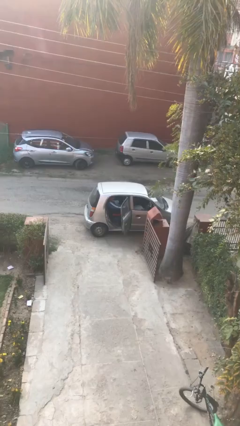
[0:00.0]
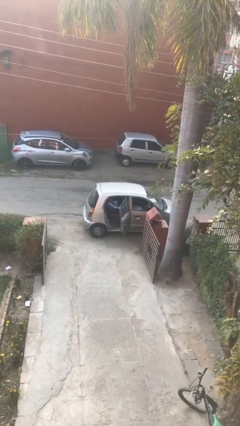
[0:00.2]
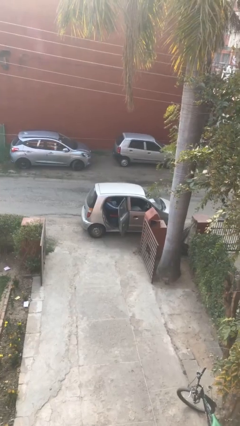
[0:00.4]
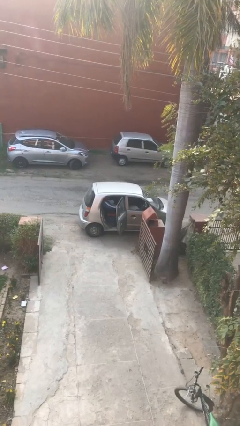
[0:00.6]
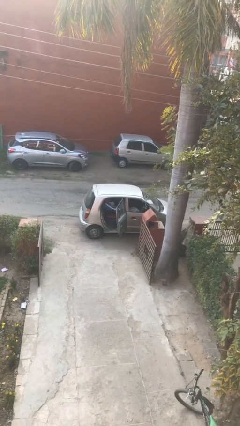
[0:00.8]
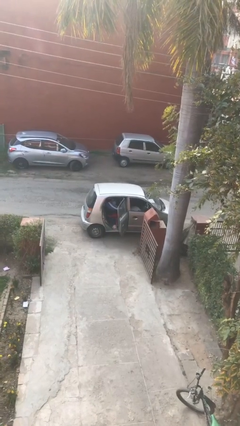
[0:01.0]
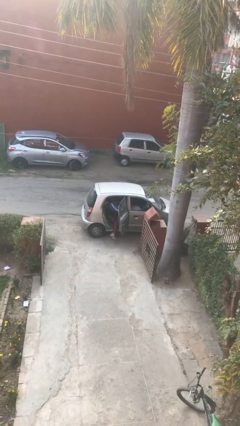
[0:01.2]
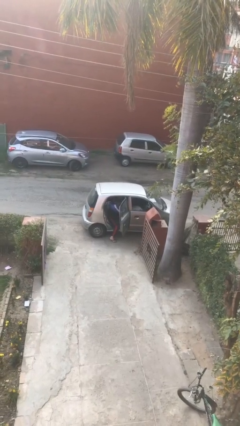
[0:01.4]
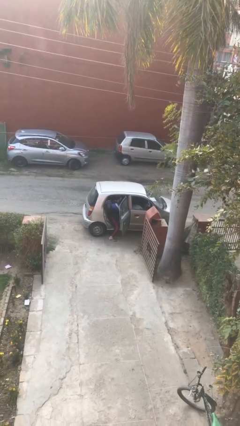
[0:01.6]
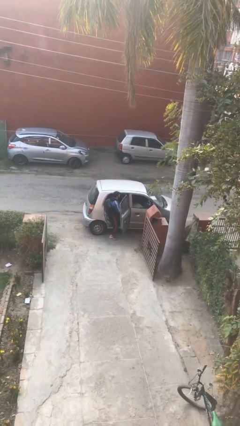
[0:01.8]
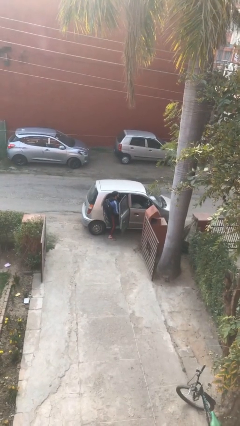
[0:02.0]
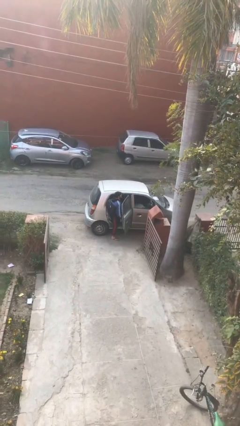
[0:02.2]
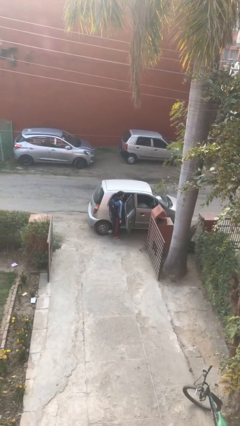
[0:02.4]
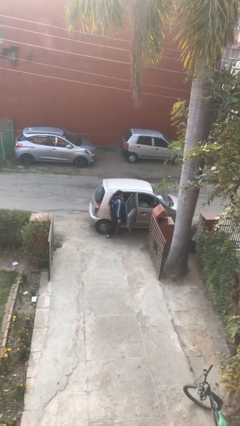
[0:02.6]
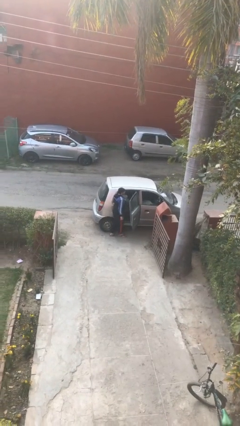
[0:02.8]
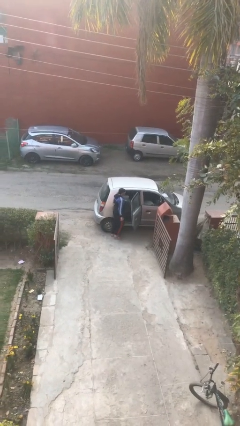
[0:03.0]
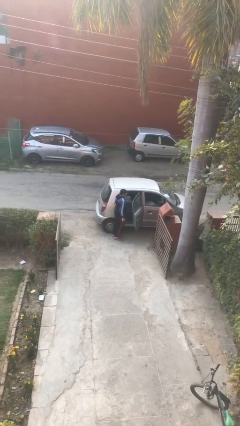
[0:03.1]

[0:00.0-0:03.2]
person exits car

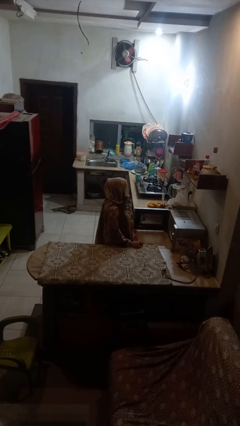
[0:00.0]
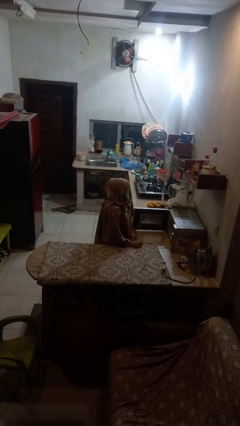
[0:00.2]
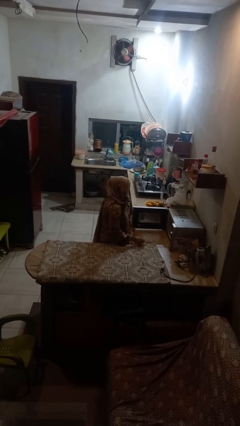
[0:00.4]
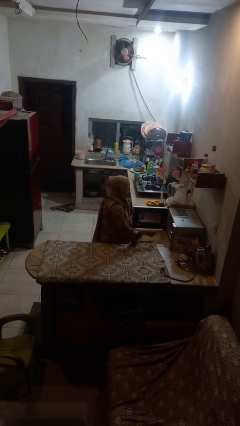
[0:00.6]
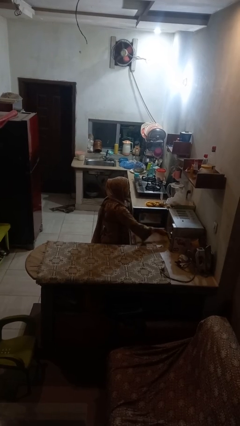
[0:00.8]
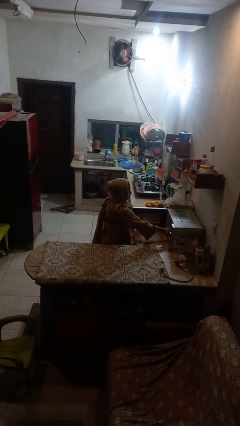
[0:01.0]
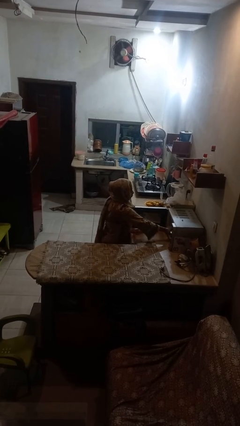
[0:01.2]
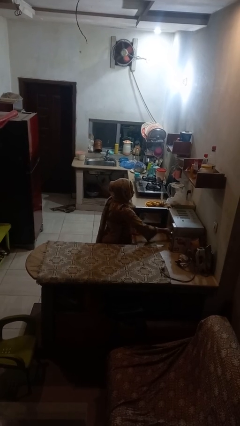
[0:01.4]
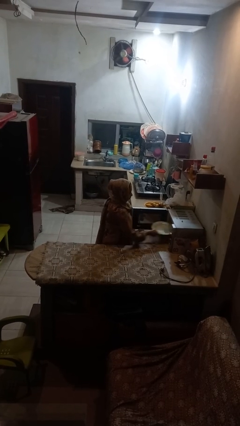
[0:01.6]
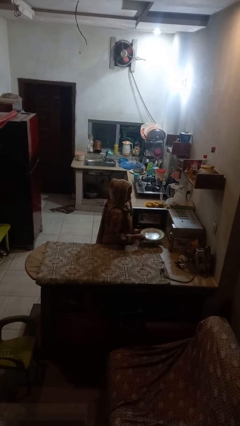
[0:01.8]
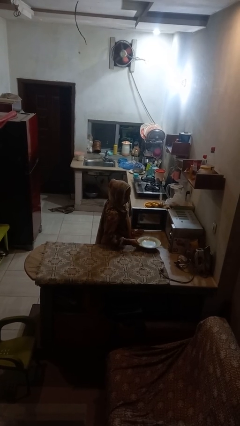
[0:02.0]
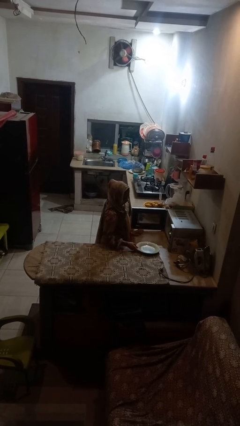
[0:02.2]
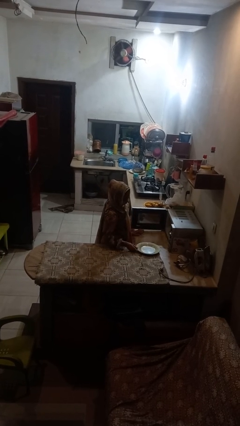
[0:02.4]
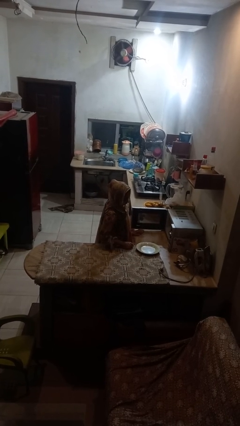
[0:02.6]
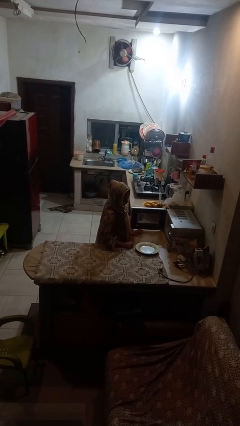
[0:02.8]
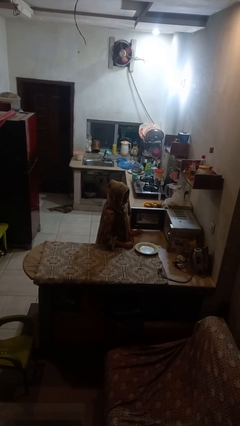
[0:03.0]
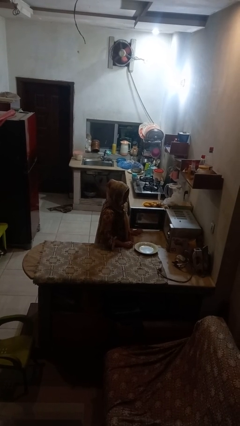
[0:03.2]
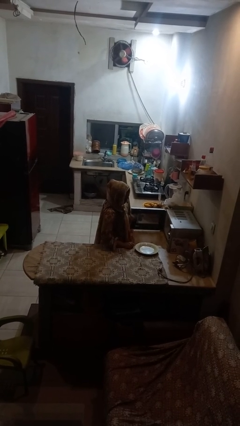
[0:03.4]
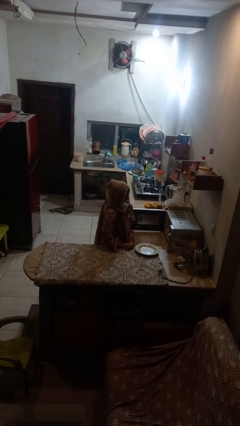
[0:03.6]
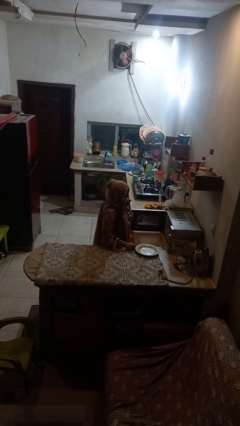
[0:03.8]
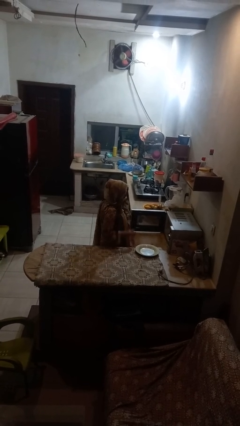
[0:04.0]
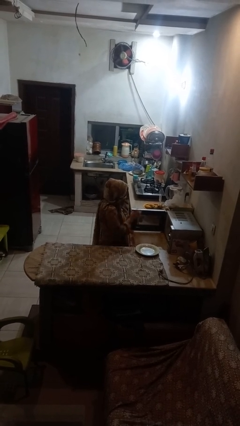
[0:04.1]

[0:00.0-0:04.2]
person takes object from microwave

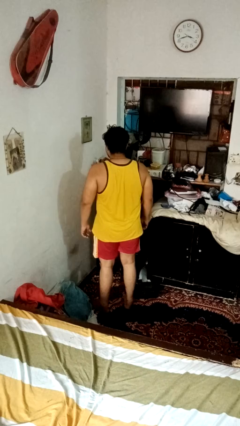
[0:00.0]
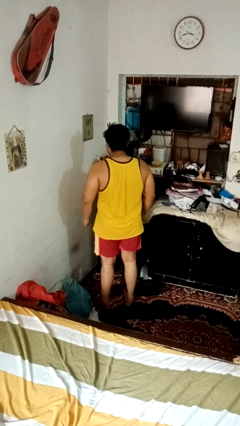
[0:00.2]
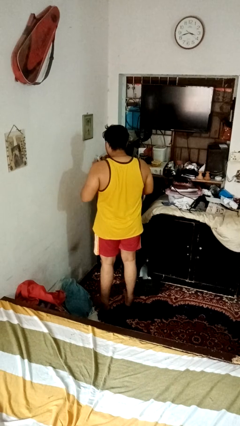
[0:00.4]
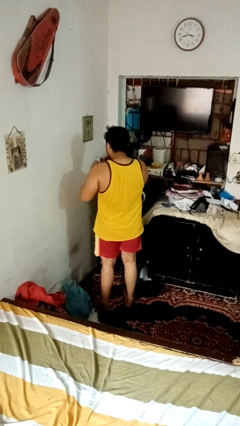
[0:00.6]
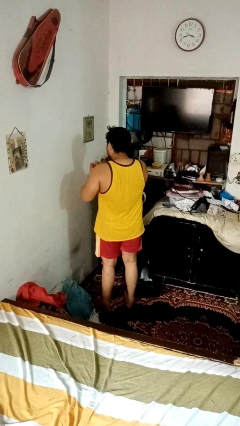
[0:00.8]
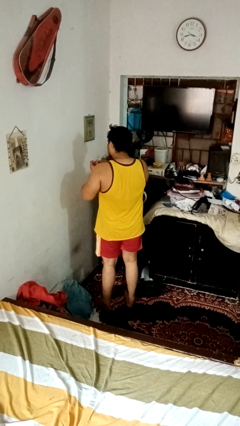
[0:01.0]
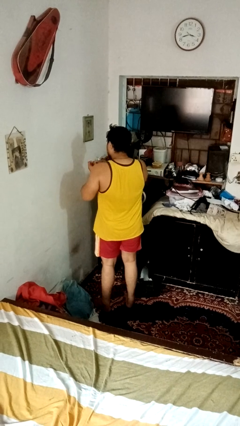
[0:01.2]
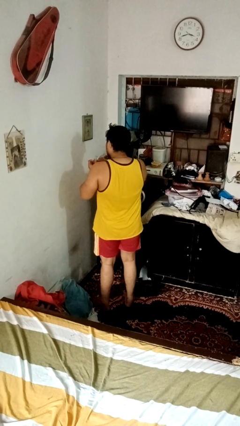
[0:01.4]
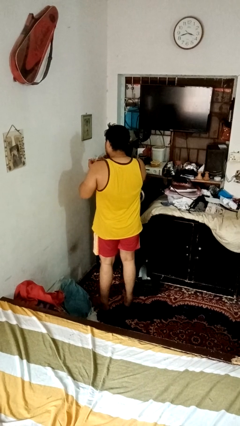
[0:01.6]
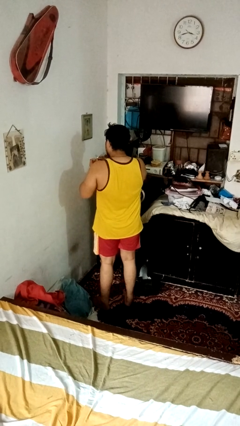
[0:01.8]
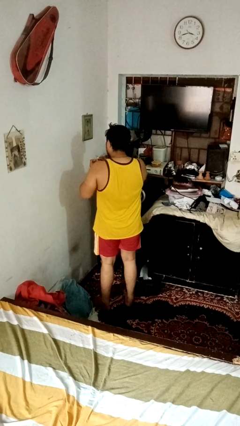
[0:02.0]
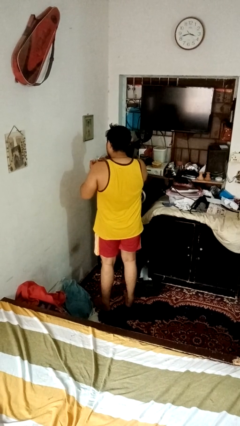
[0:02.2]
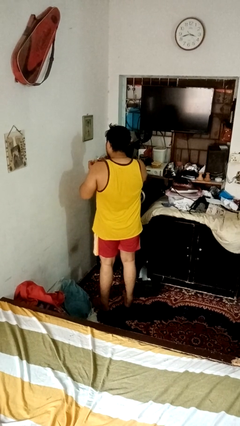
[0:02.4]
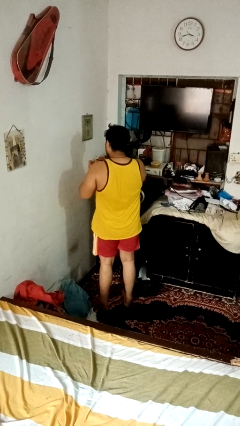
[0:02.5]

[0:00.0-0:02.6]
person files fingernails

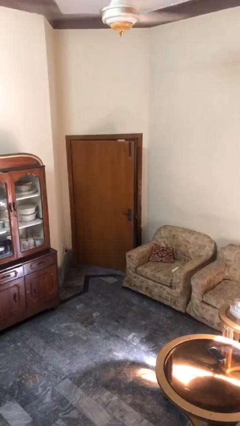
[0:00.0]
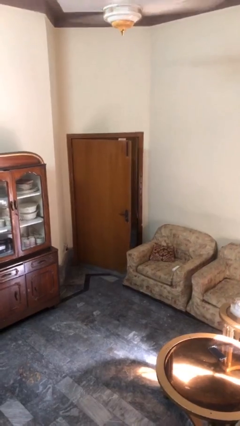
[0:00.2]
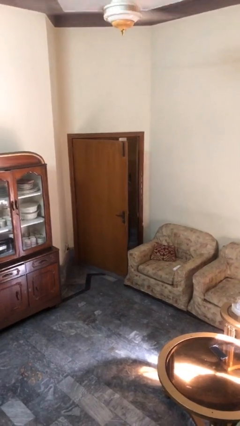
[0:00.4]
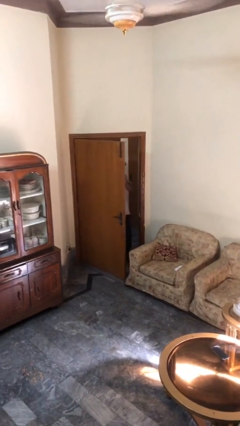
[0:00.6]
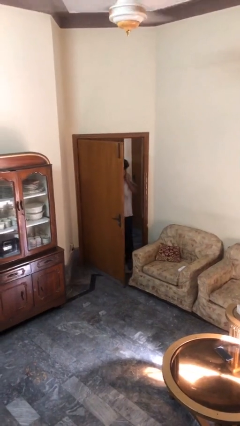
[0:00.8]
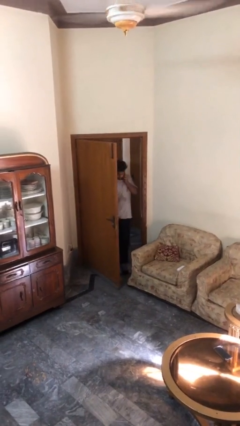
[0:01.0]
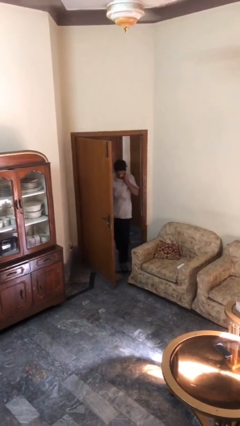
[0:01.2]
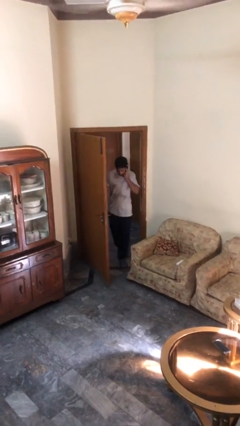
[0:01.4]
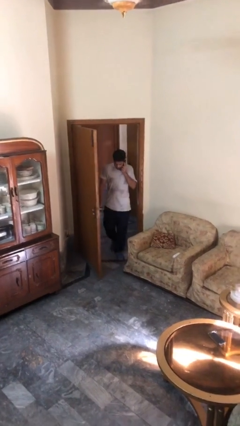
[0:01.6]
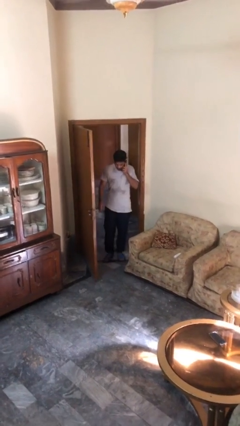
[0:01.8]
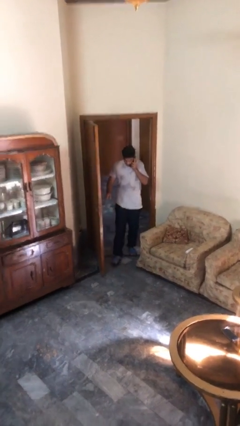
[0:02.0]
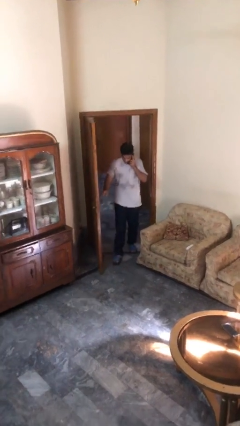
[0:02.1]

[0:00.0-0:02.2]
person opens facility door

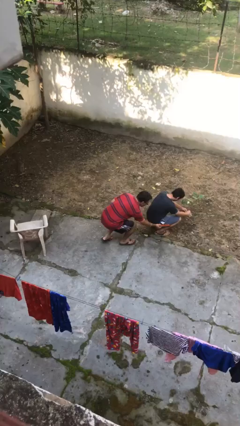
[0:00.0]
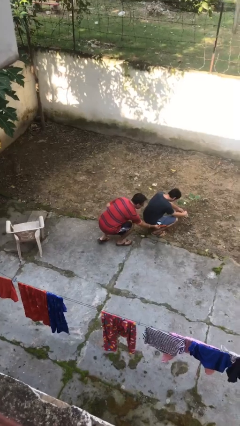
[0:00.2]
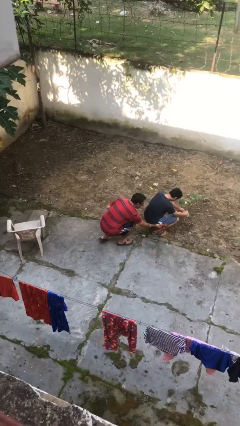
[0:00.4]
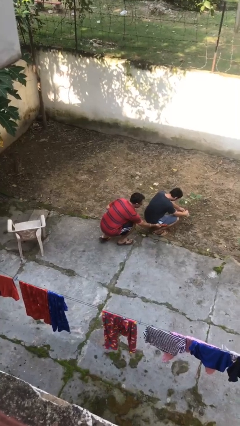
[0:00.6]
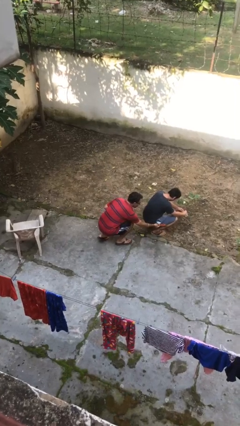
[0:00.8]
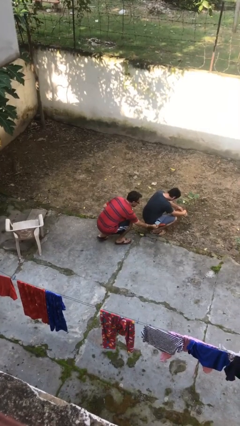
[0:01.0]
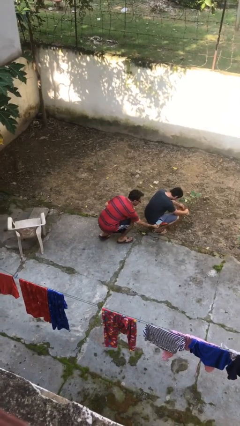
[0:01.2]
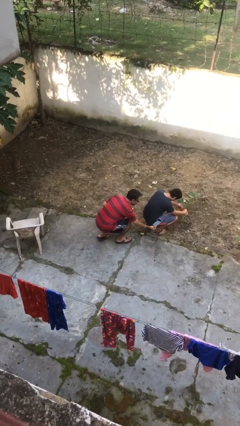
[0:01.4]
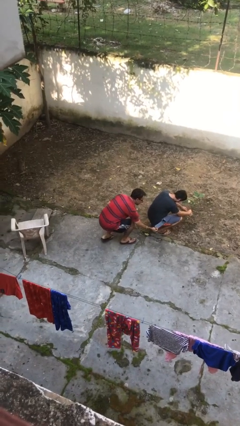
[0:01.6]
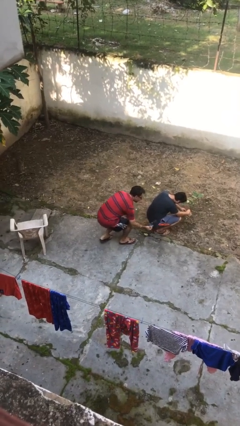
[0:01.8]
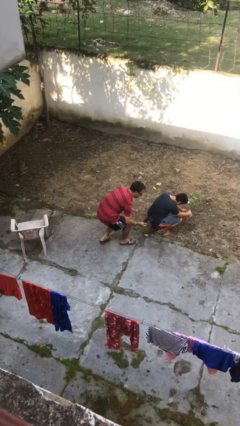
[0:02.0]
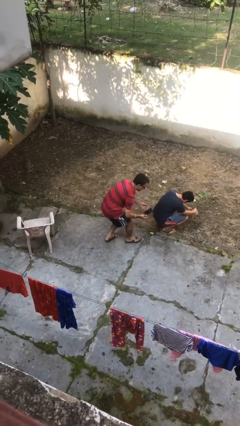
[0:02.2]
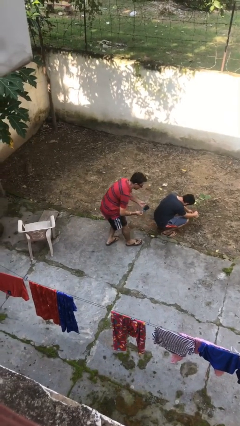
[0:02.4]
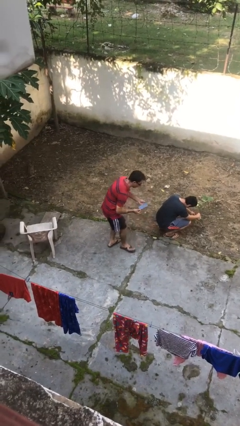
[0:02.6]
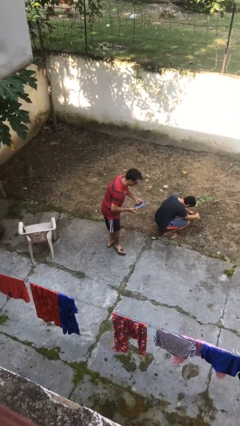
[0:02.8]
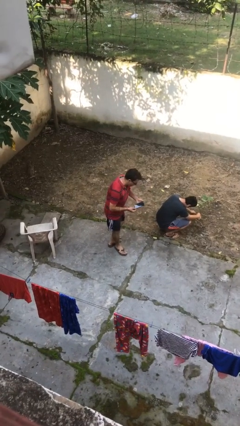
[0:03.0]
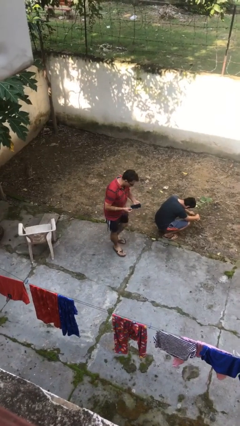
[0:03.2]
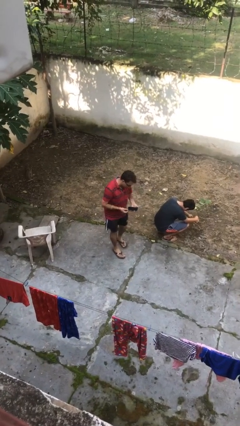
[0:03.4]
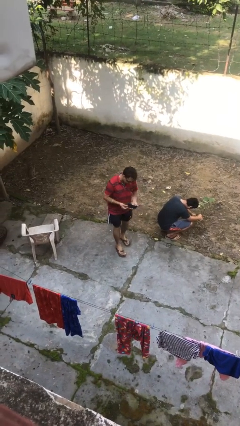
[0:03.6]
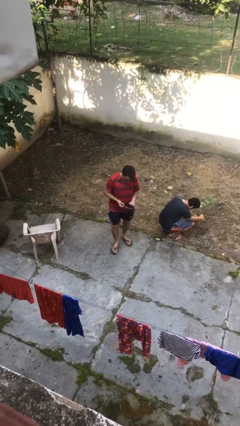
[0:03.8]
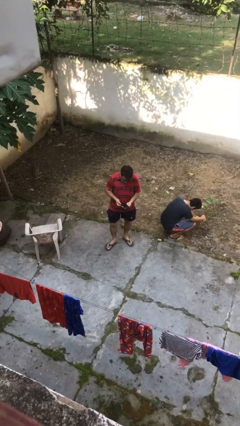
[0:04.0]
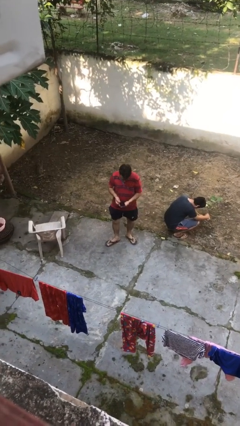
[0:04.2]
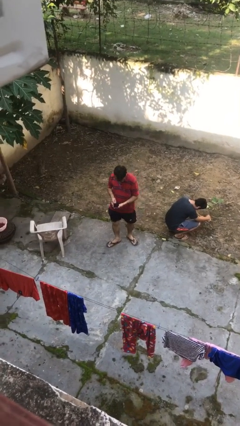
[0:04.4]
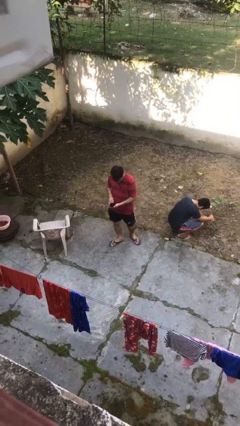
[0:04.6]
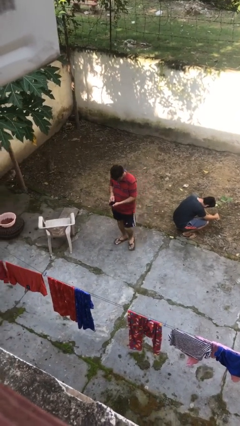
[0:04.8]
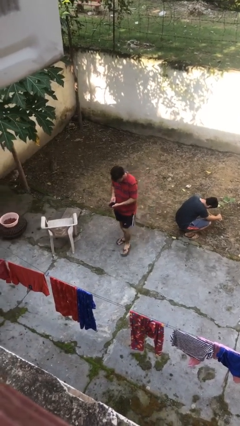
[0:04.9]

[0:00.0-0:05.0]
person steals object from person

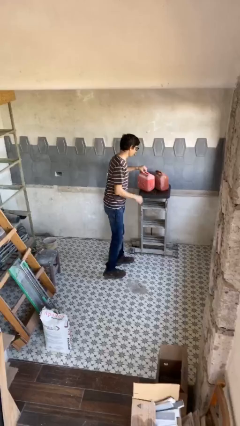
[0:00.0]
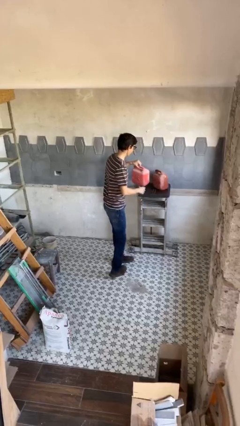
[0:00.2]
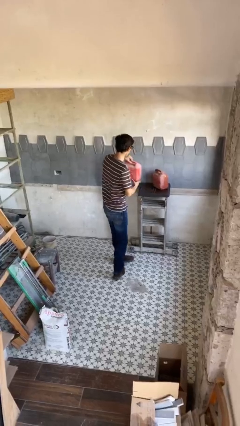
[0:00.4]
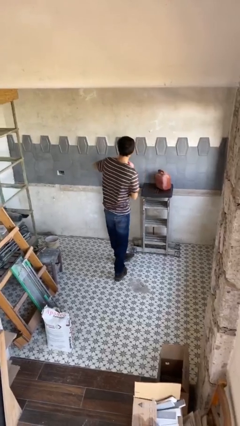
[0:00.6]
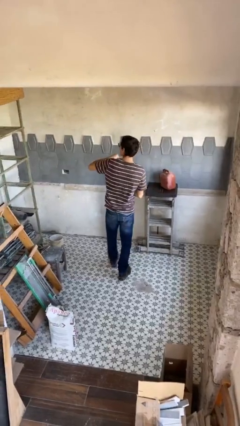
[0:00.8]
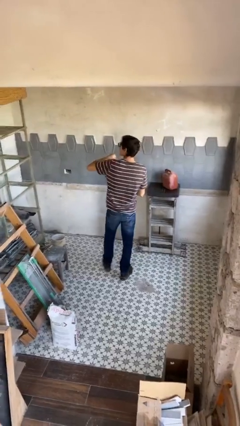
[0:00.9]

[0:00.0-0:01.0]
person picks up object from table
